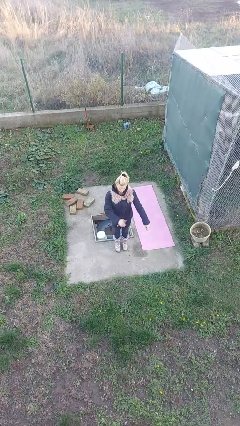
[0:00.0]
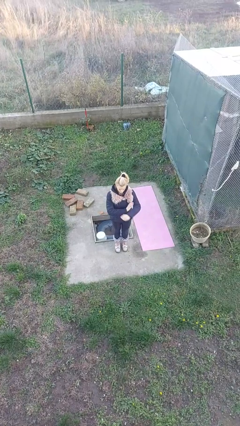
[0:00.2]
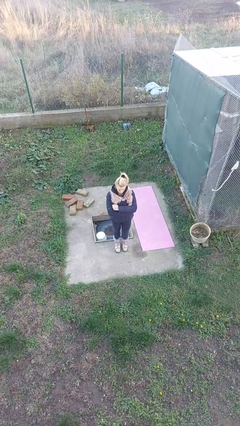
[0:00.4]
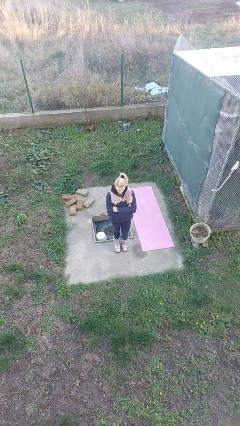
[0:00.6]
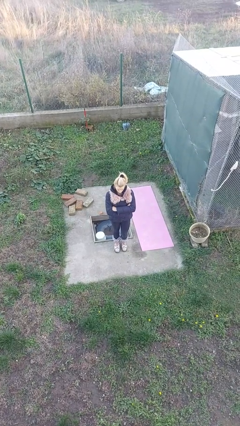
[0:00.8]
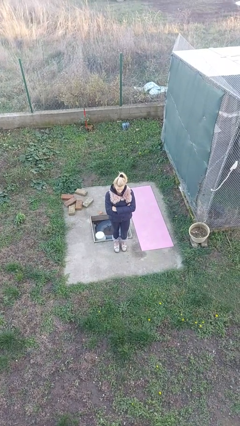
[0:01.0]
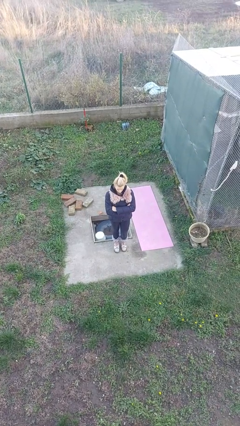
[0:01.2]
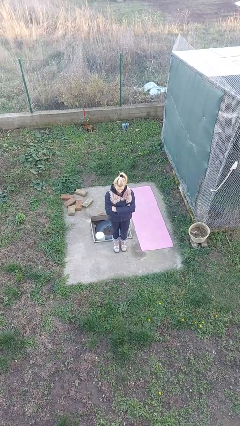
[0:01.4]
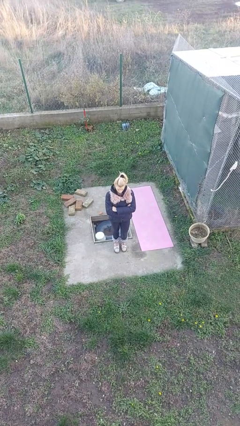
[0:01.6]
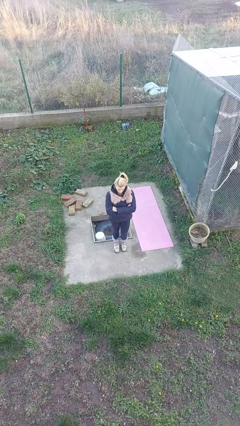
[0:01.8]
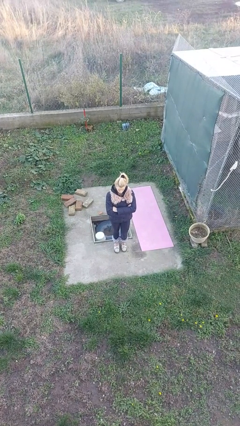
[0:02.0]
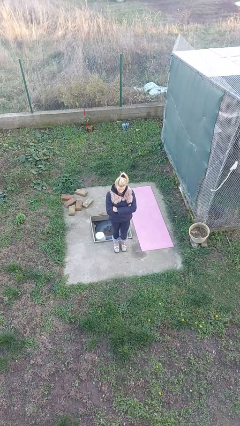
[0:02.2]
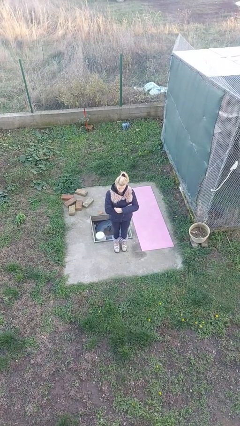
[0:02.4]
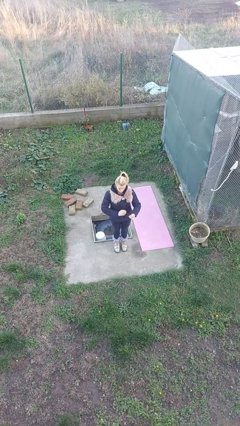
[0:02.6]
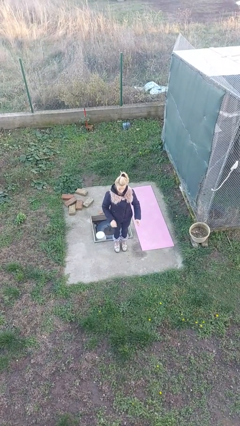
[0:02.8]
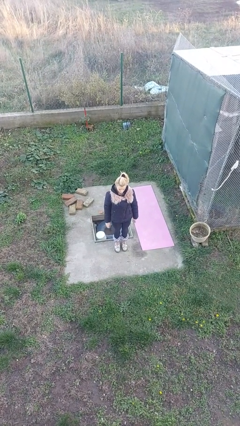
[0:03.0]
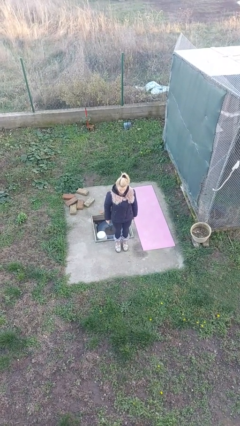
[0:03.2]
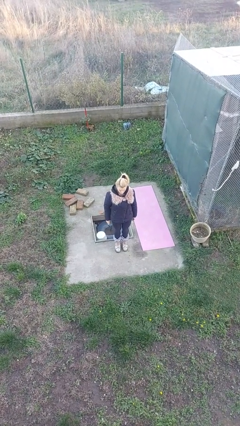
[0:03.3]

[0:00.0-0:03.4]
person crosses arms

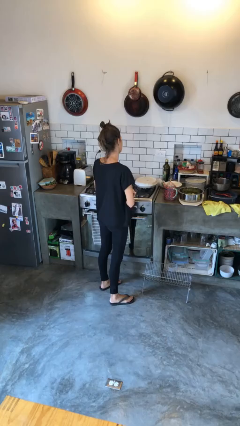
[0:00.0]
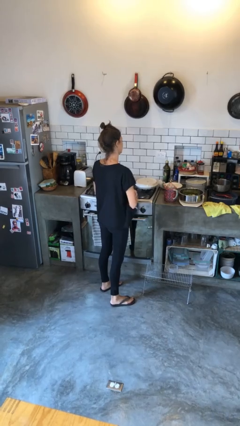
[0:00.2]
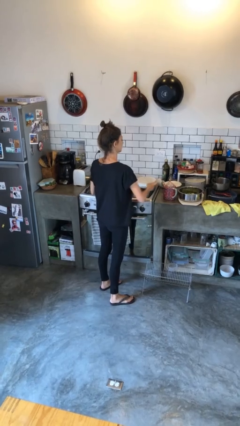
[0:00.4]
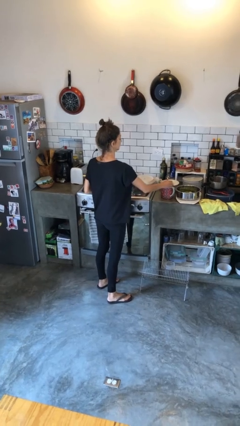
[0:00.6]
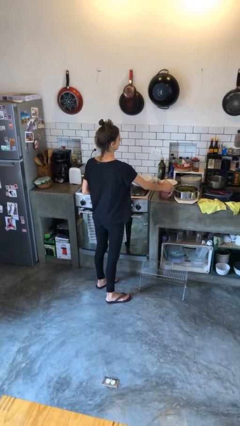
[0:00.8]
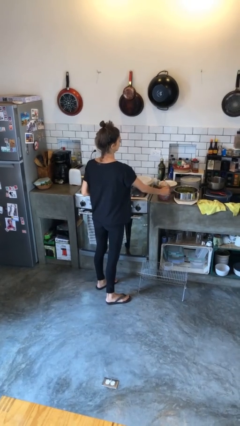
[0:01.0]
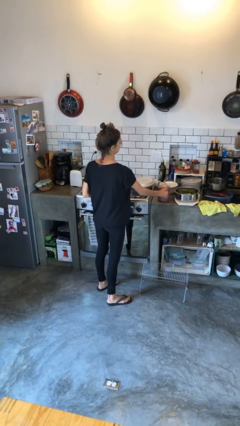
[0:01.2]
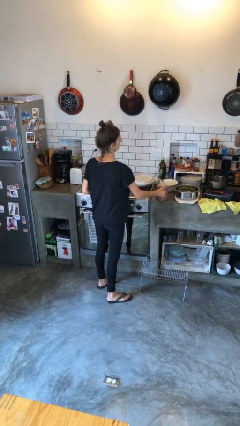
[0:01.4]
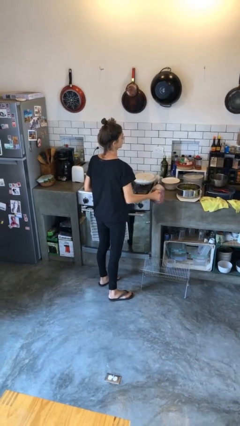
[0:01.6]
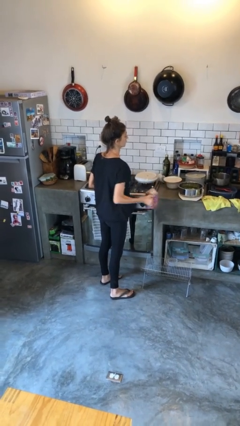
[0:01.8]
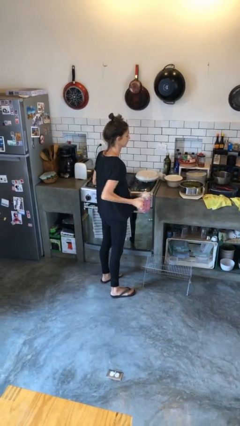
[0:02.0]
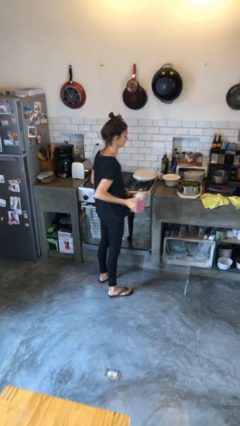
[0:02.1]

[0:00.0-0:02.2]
person picks up object from countertop

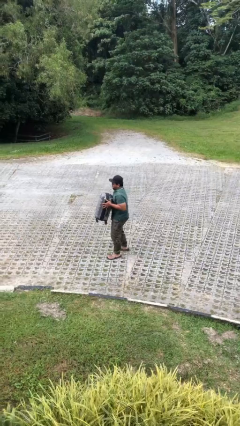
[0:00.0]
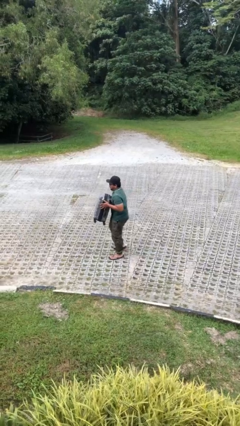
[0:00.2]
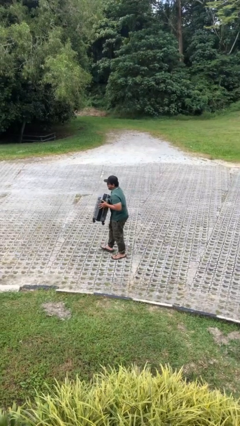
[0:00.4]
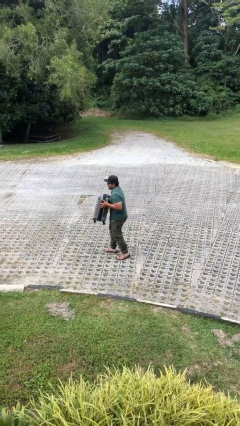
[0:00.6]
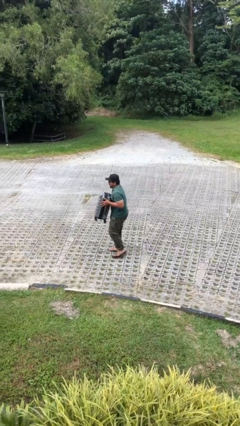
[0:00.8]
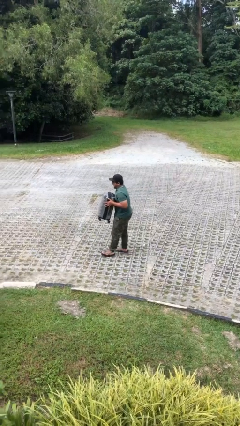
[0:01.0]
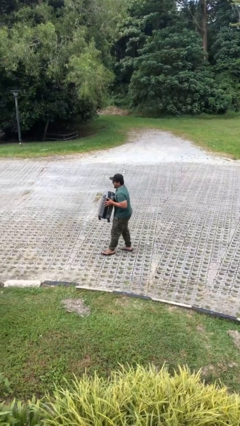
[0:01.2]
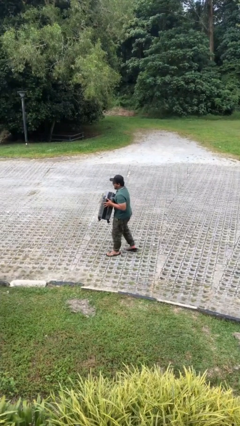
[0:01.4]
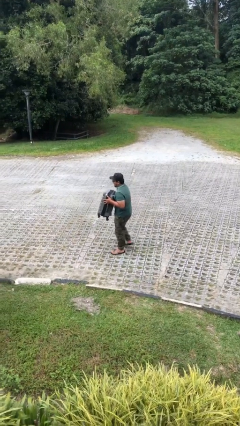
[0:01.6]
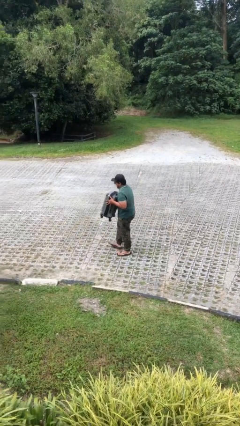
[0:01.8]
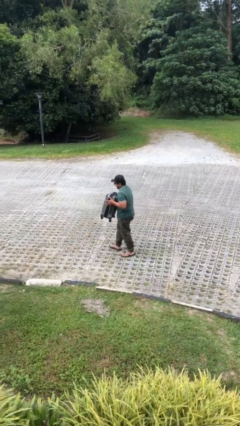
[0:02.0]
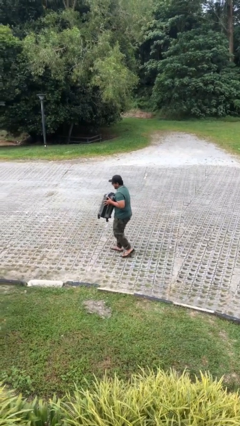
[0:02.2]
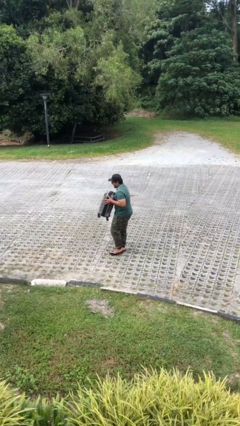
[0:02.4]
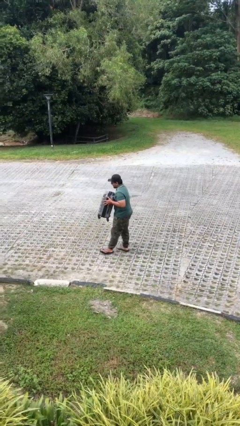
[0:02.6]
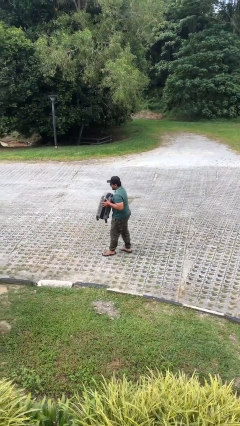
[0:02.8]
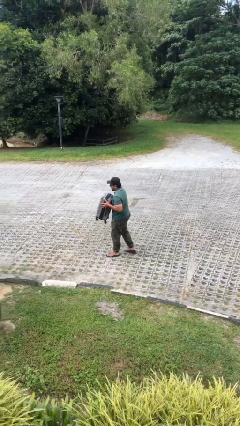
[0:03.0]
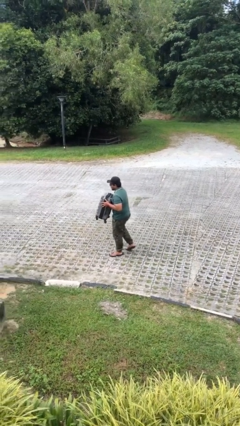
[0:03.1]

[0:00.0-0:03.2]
person carries heavy object

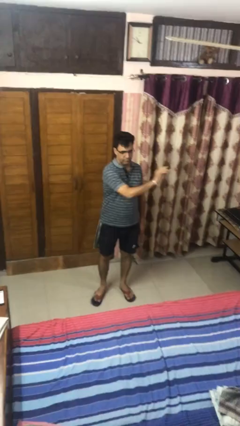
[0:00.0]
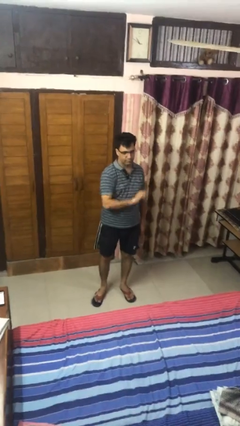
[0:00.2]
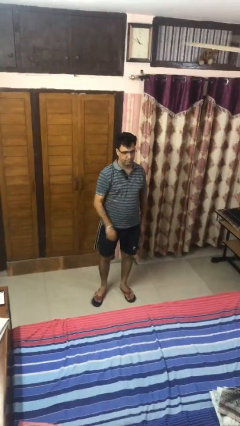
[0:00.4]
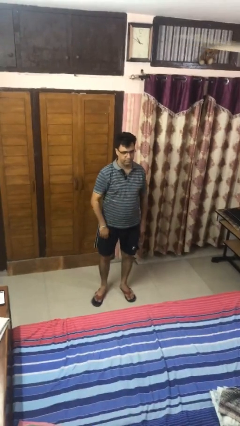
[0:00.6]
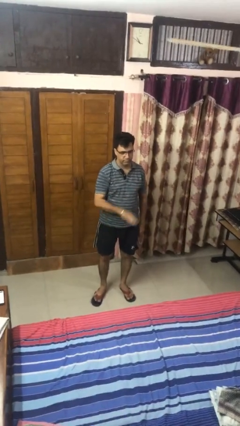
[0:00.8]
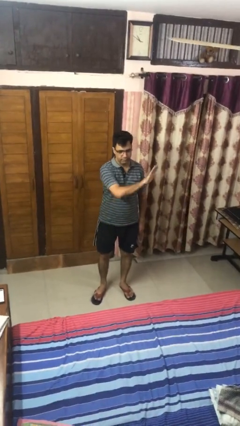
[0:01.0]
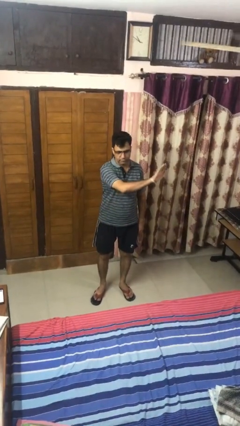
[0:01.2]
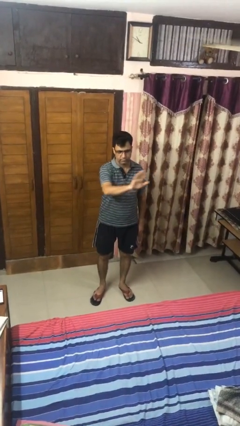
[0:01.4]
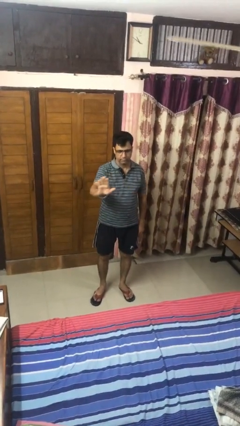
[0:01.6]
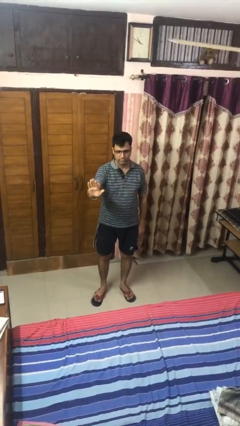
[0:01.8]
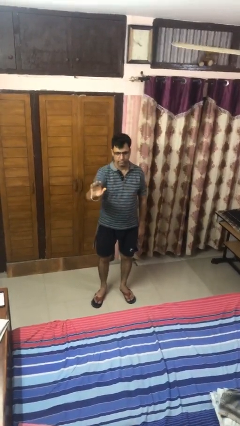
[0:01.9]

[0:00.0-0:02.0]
person gestures swipe right

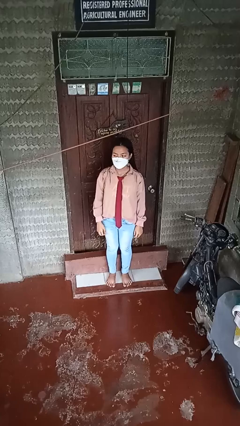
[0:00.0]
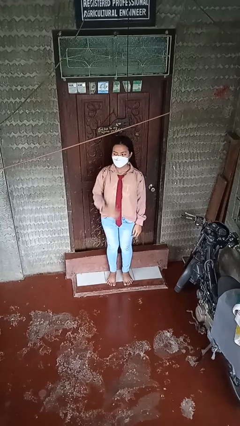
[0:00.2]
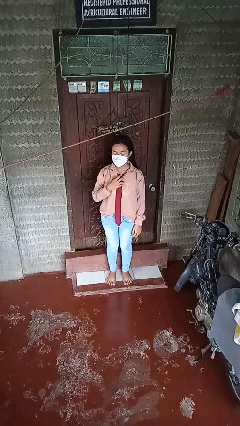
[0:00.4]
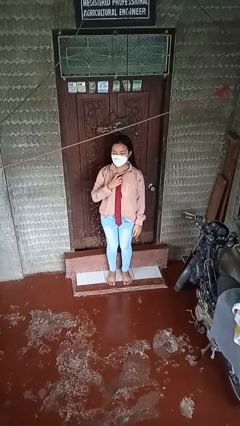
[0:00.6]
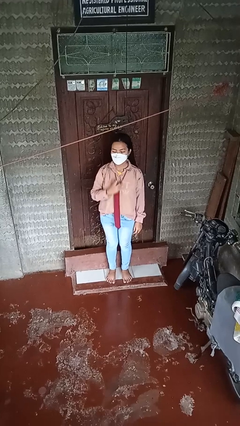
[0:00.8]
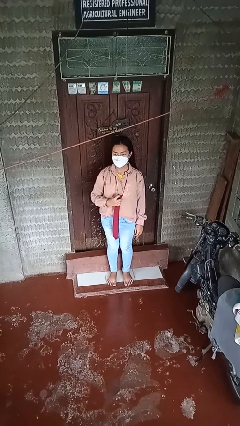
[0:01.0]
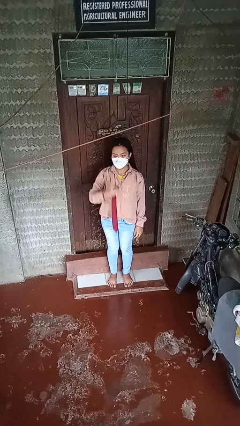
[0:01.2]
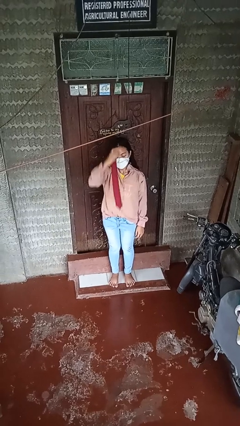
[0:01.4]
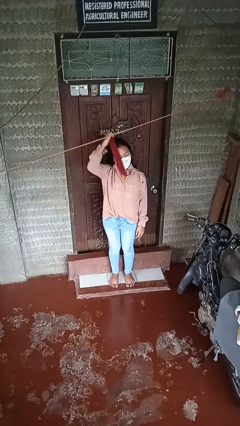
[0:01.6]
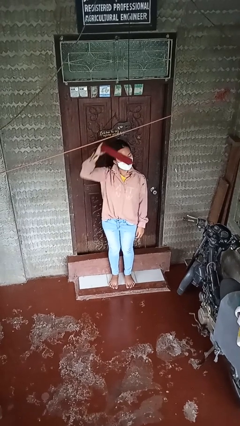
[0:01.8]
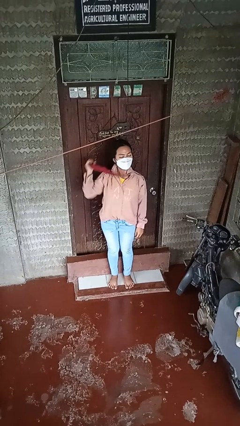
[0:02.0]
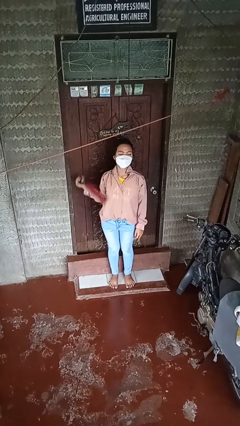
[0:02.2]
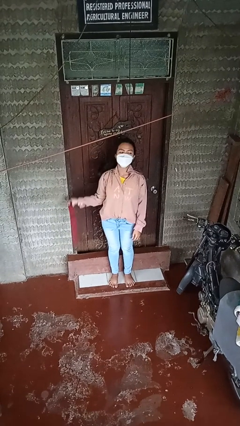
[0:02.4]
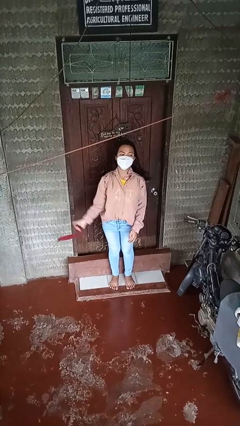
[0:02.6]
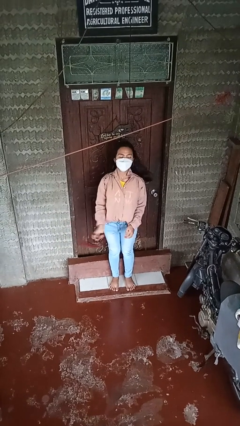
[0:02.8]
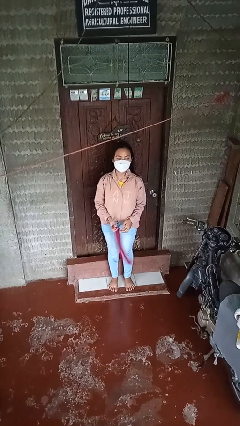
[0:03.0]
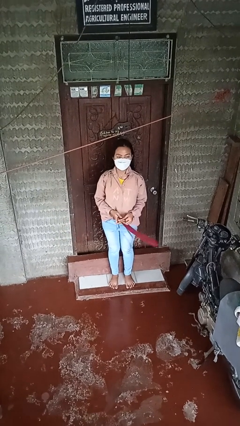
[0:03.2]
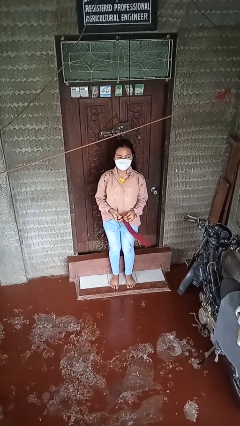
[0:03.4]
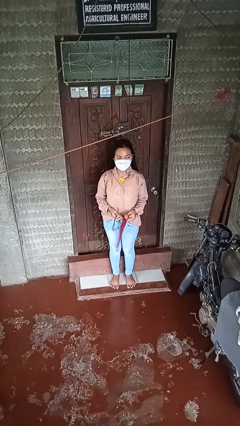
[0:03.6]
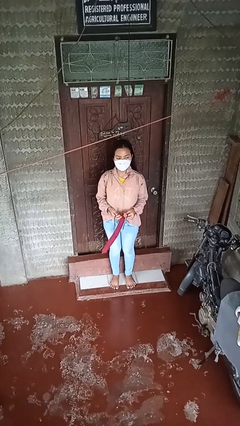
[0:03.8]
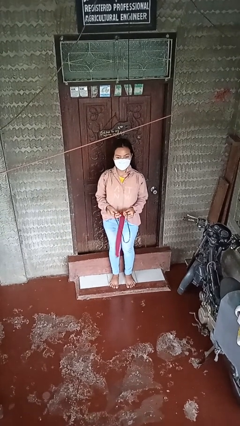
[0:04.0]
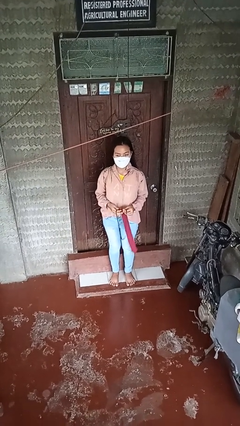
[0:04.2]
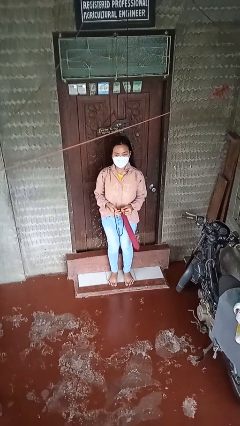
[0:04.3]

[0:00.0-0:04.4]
person takes off necktie

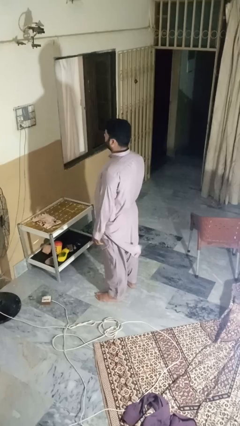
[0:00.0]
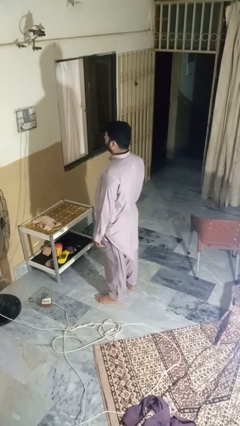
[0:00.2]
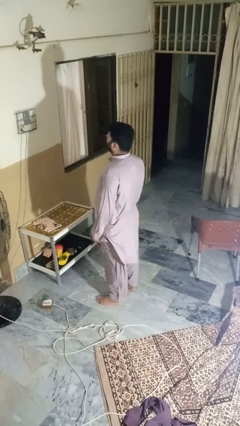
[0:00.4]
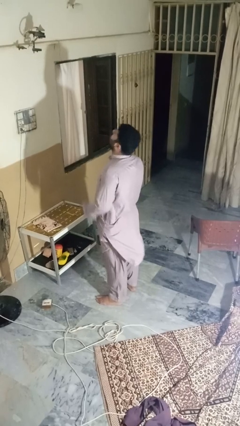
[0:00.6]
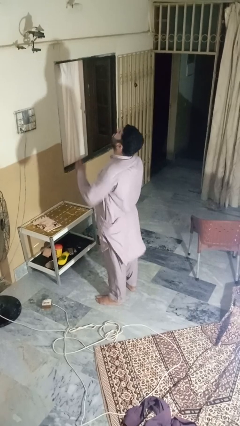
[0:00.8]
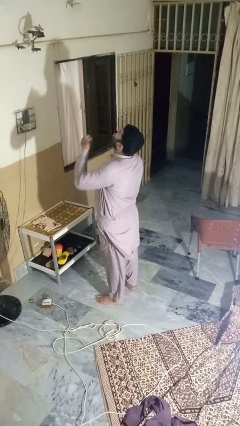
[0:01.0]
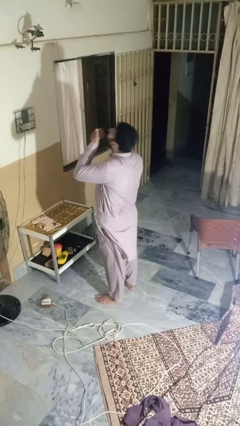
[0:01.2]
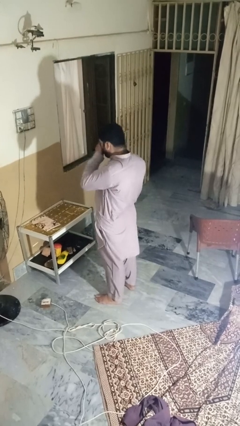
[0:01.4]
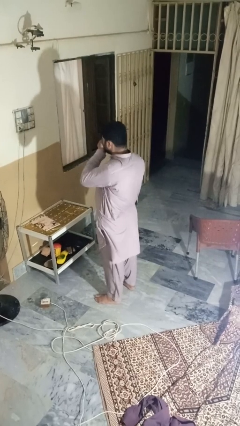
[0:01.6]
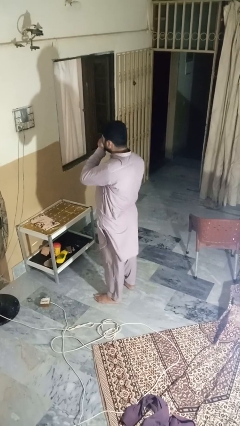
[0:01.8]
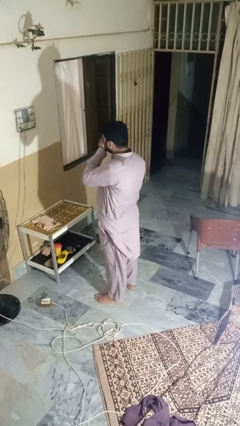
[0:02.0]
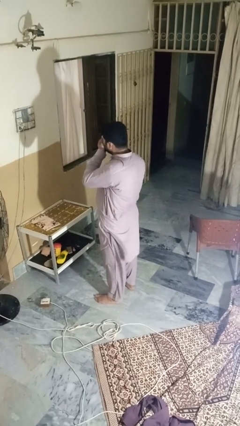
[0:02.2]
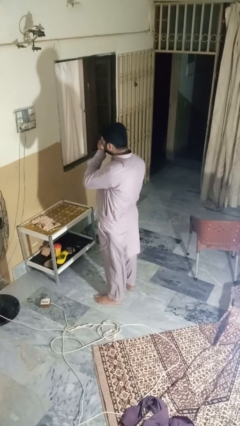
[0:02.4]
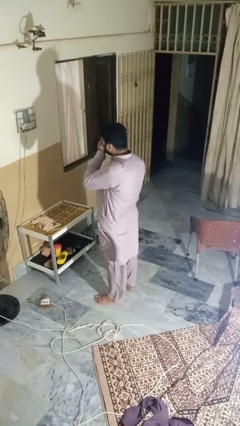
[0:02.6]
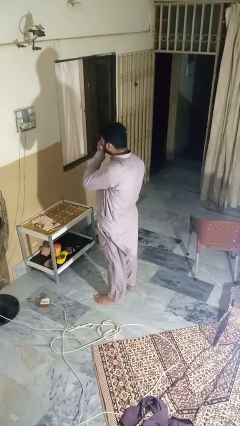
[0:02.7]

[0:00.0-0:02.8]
person sneezes into hand
